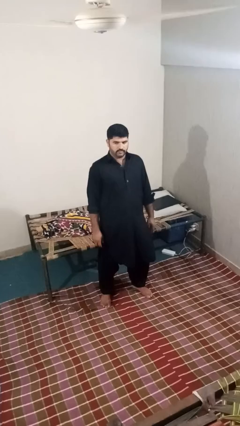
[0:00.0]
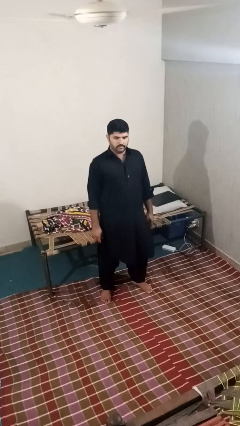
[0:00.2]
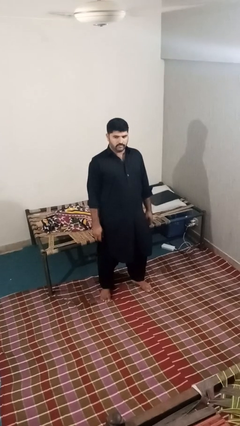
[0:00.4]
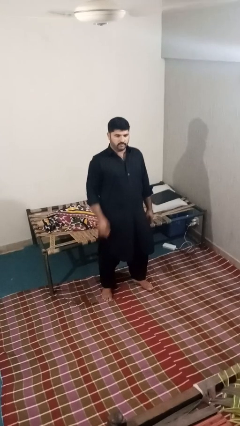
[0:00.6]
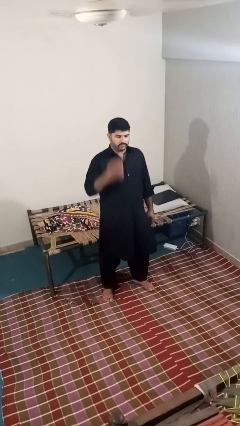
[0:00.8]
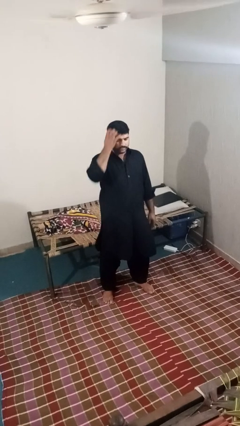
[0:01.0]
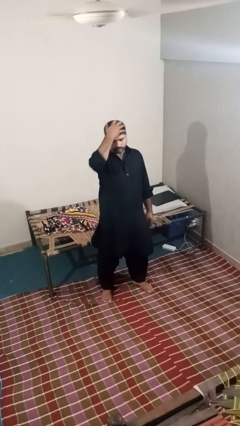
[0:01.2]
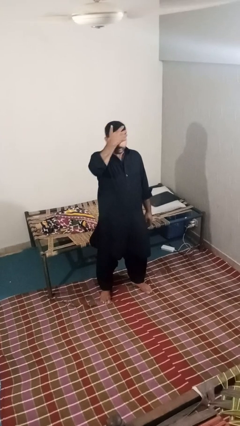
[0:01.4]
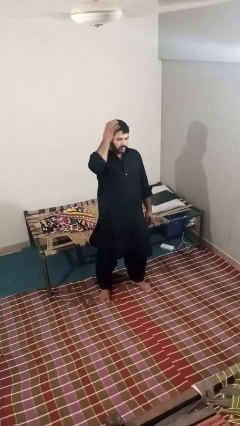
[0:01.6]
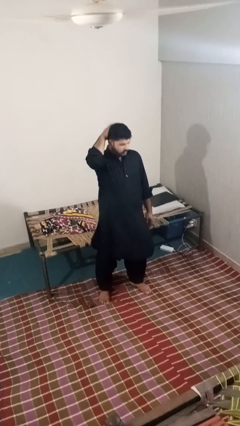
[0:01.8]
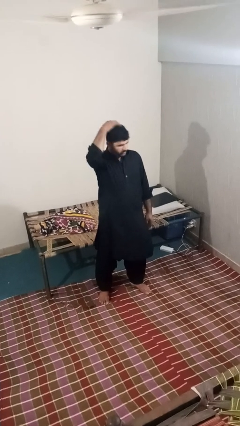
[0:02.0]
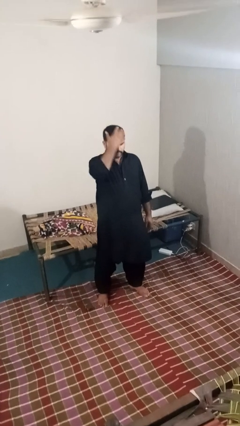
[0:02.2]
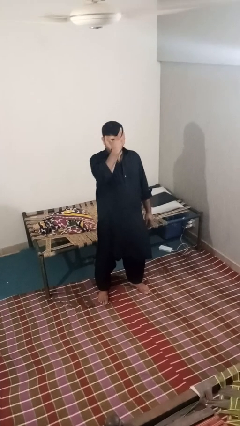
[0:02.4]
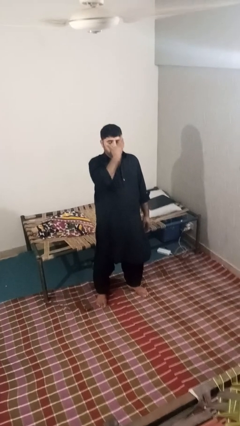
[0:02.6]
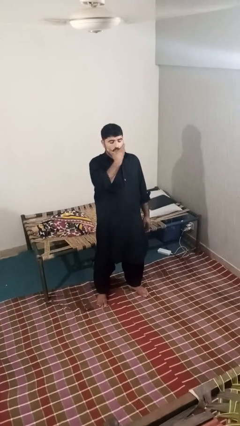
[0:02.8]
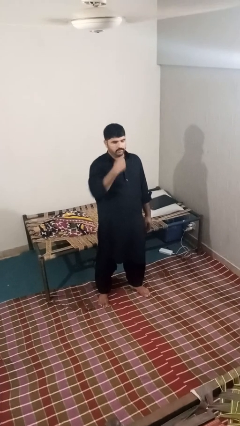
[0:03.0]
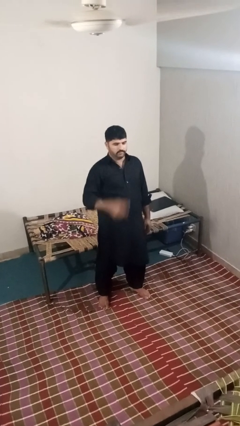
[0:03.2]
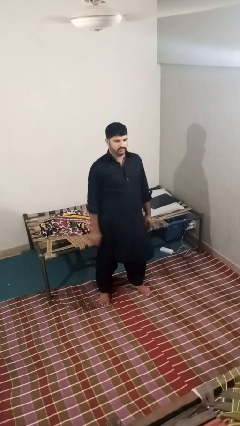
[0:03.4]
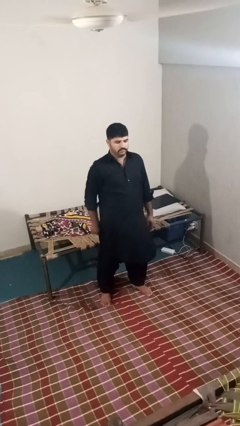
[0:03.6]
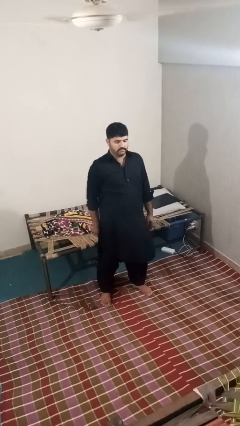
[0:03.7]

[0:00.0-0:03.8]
person scratches face

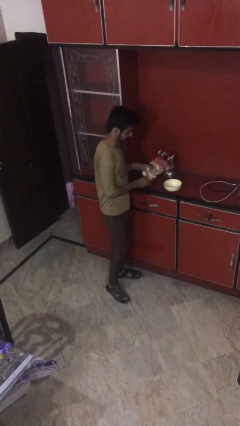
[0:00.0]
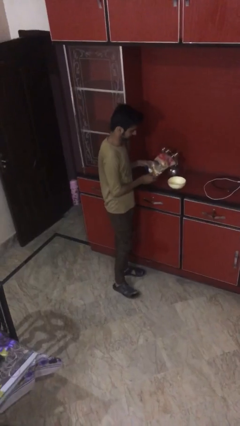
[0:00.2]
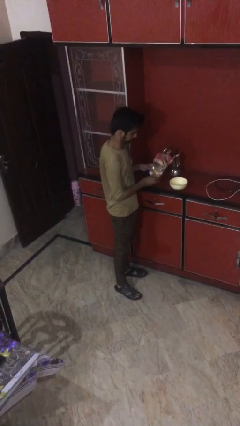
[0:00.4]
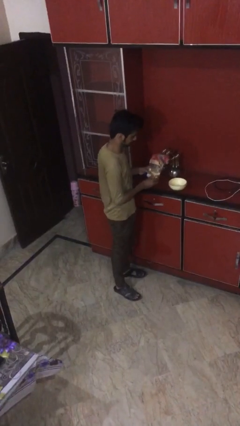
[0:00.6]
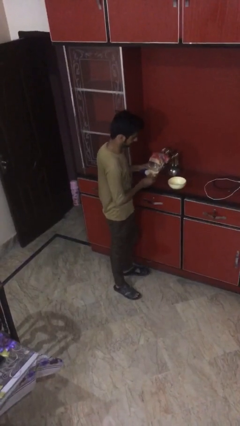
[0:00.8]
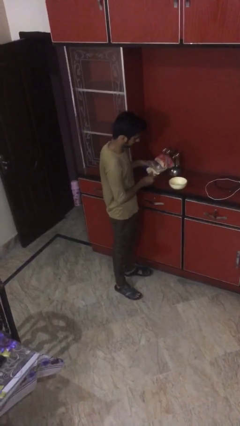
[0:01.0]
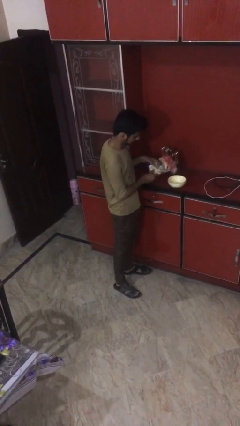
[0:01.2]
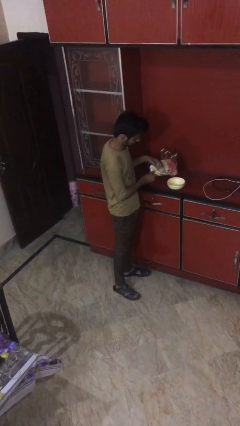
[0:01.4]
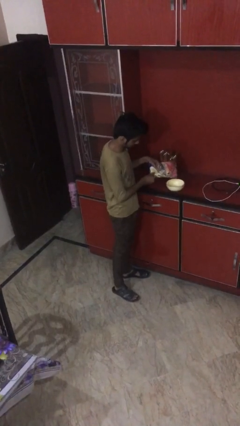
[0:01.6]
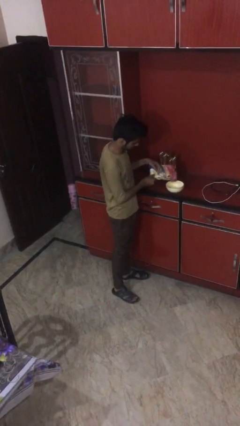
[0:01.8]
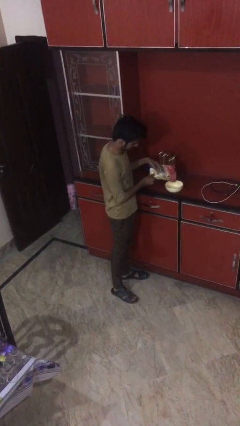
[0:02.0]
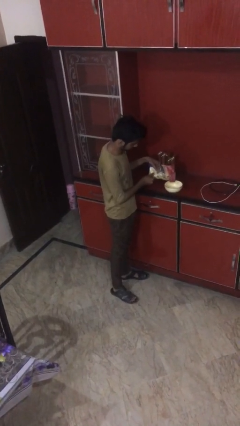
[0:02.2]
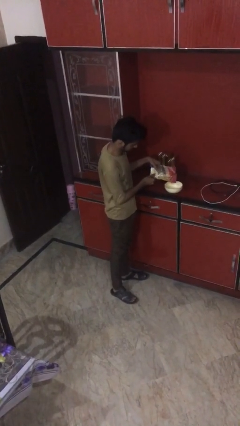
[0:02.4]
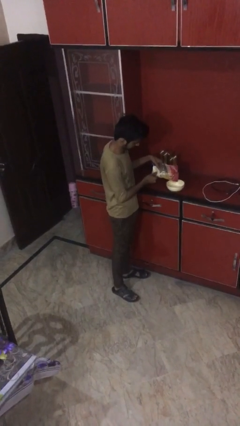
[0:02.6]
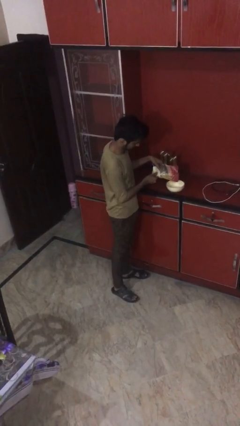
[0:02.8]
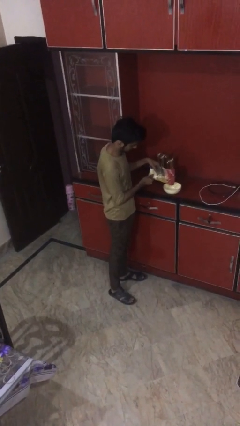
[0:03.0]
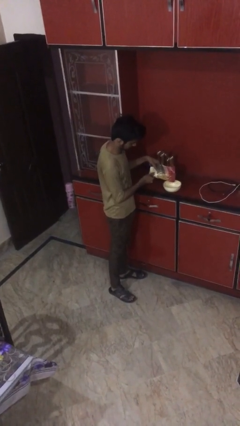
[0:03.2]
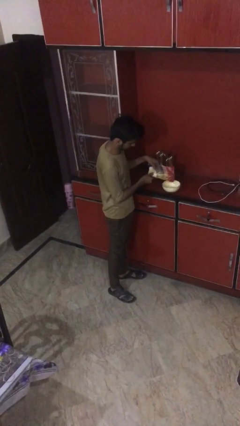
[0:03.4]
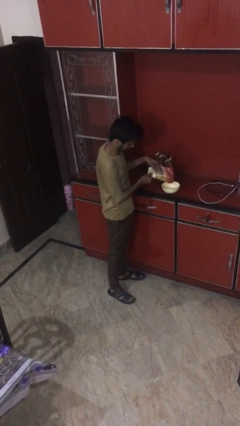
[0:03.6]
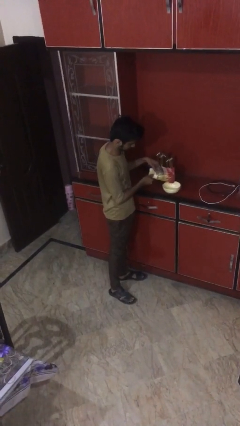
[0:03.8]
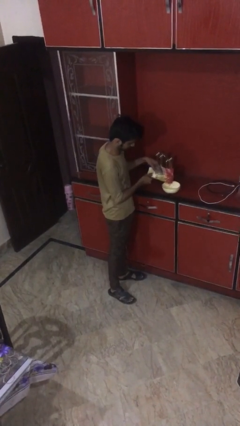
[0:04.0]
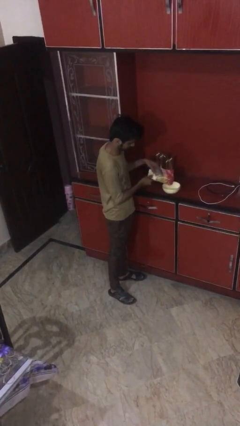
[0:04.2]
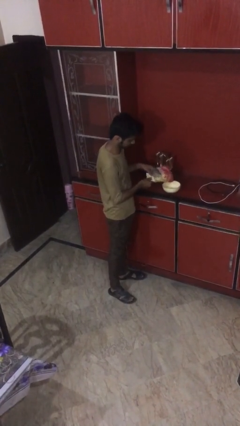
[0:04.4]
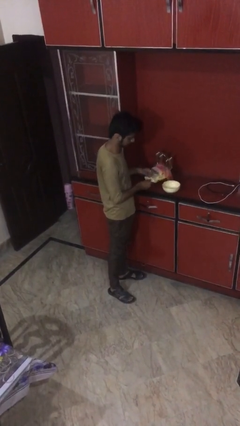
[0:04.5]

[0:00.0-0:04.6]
person pours into bowl

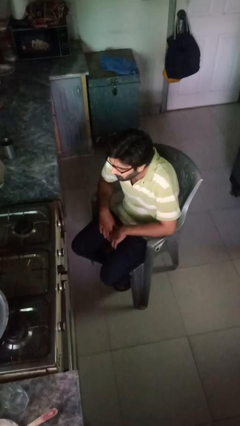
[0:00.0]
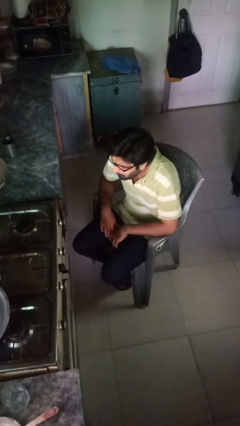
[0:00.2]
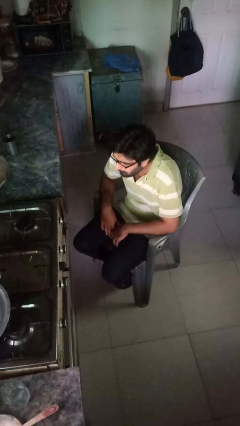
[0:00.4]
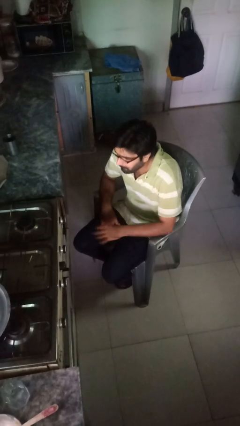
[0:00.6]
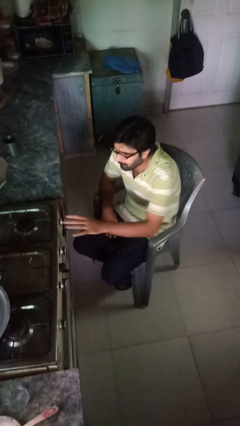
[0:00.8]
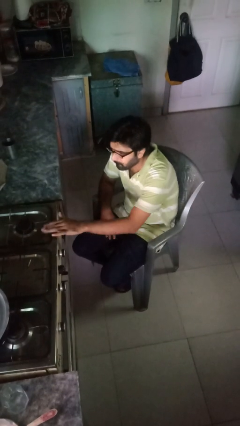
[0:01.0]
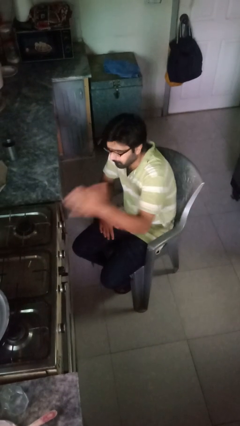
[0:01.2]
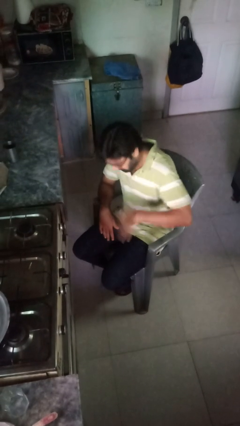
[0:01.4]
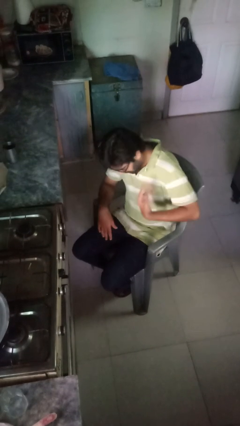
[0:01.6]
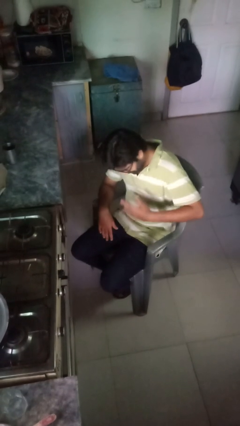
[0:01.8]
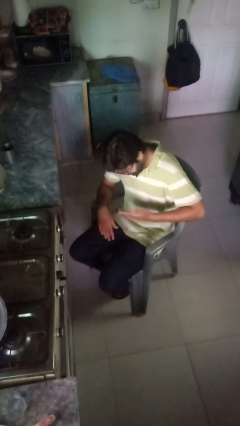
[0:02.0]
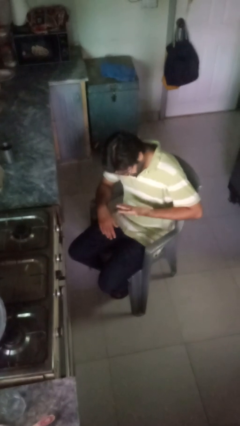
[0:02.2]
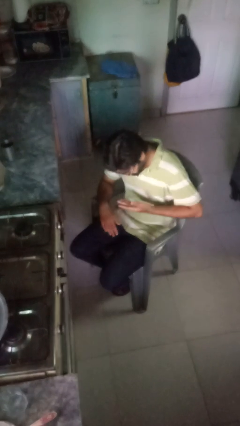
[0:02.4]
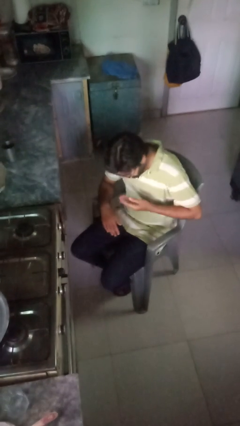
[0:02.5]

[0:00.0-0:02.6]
person burns hand

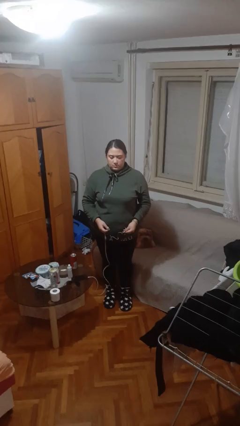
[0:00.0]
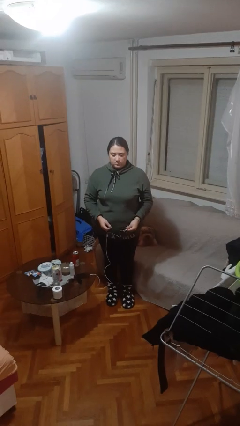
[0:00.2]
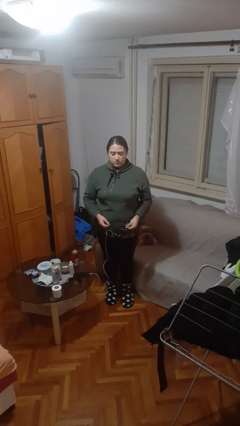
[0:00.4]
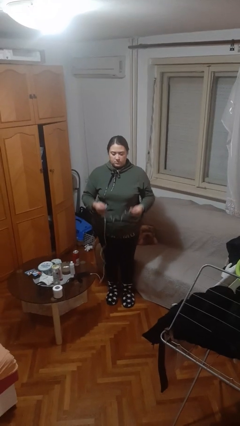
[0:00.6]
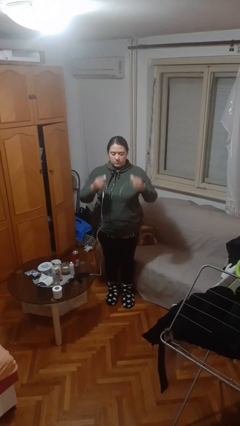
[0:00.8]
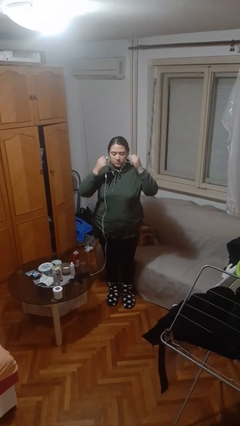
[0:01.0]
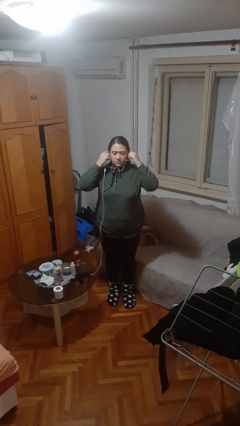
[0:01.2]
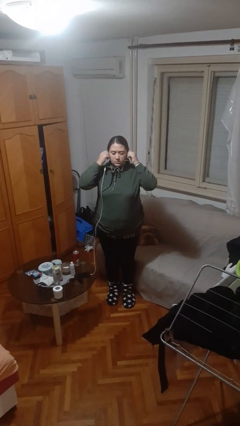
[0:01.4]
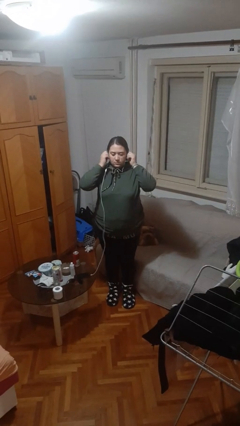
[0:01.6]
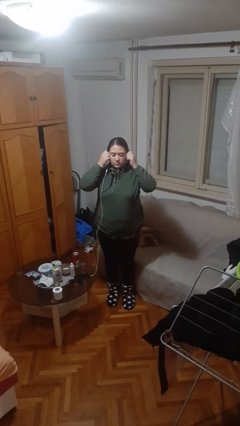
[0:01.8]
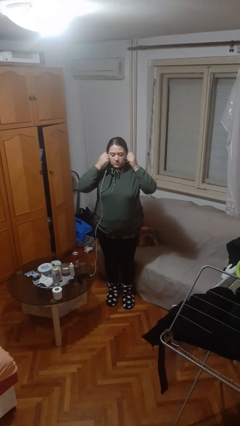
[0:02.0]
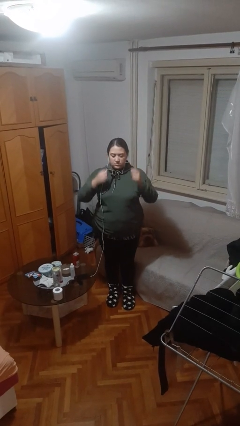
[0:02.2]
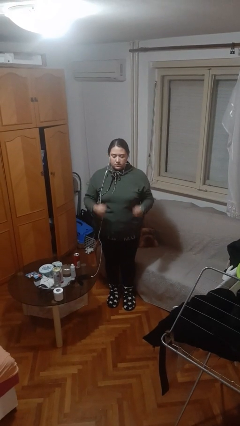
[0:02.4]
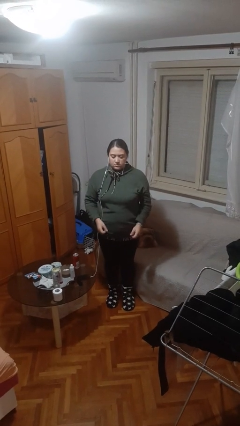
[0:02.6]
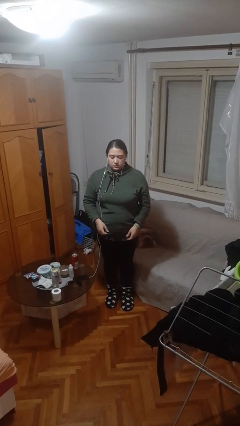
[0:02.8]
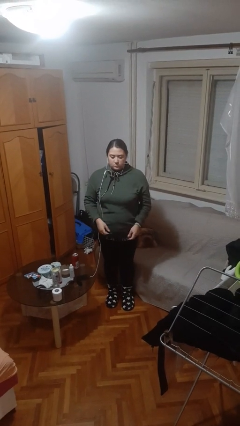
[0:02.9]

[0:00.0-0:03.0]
person puts on headphones

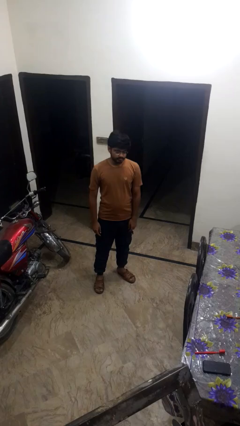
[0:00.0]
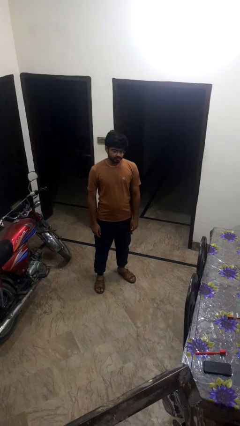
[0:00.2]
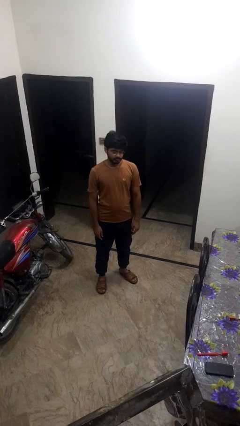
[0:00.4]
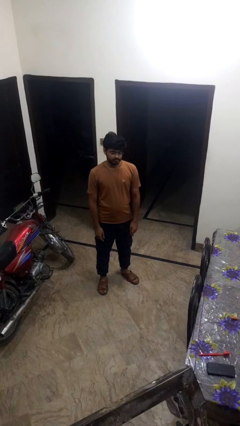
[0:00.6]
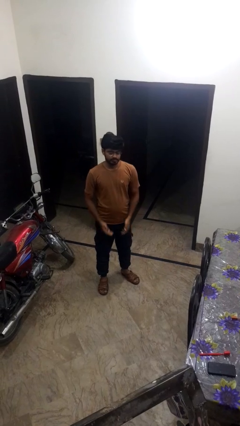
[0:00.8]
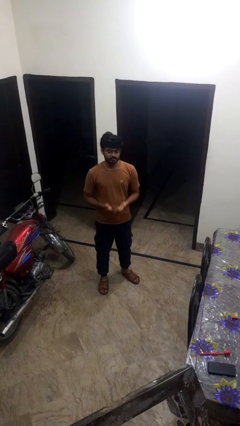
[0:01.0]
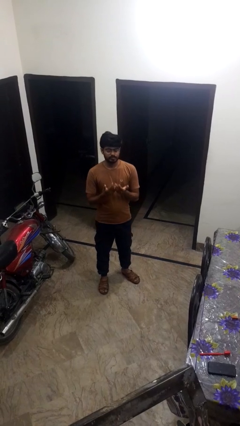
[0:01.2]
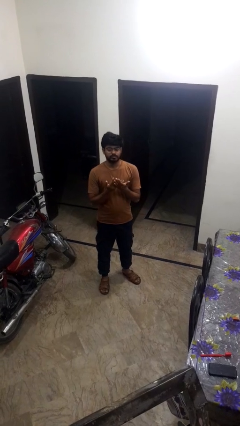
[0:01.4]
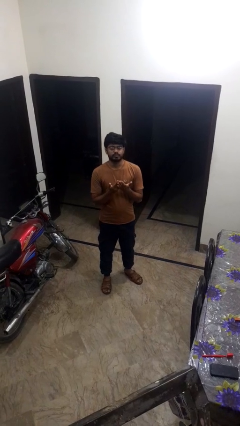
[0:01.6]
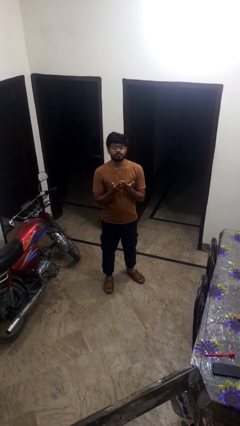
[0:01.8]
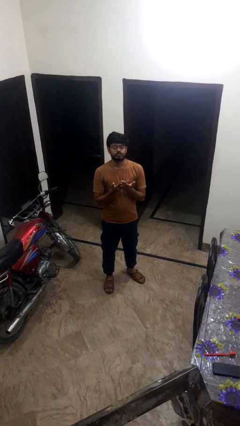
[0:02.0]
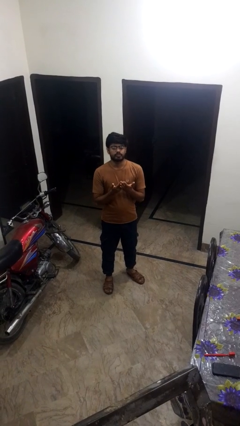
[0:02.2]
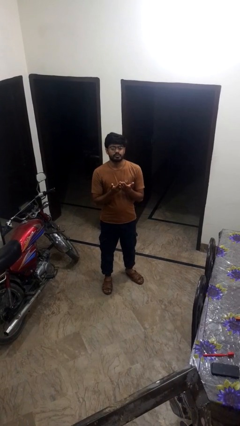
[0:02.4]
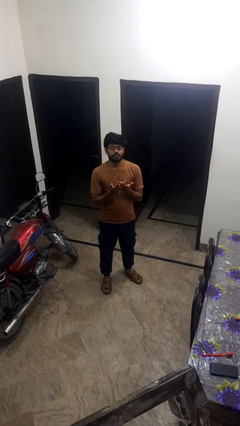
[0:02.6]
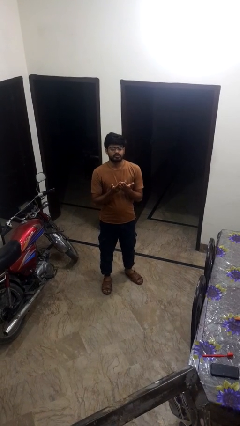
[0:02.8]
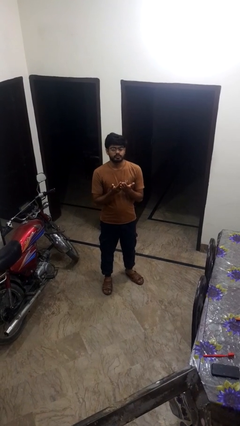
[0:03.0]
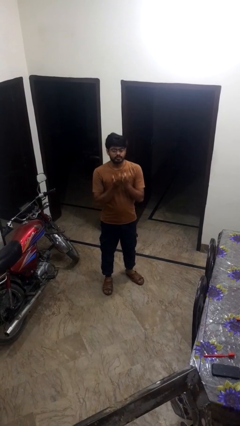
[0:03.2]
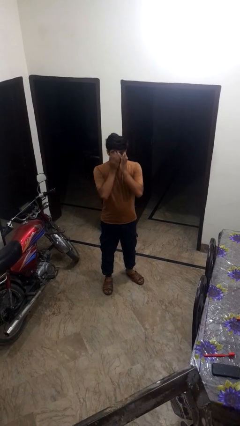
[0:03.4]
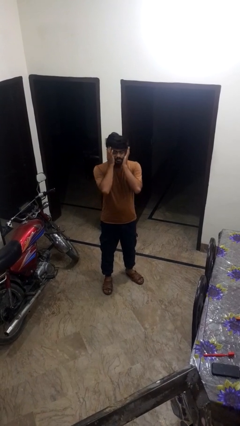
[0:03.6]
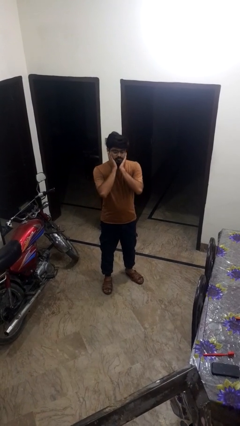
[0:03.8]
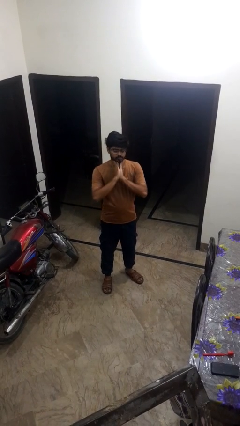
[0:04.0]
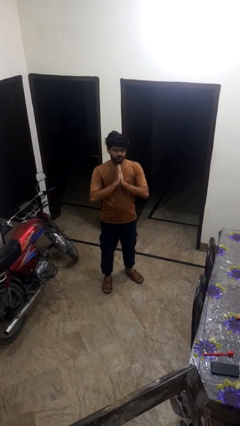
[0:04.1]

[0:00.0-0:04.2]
person prays
